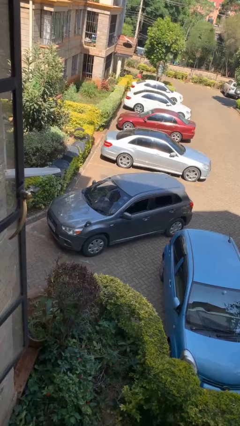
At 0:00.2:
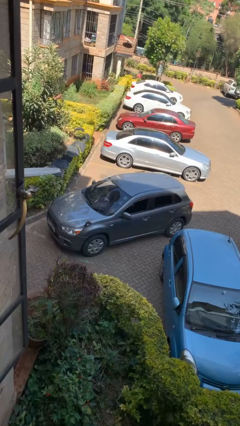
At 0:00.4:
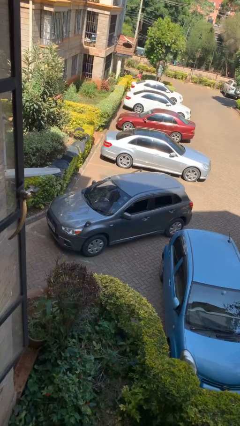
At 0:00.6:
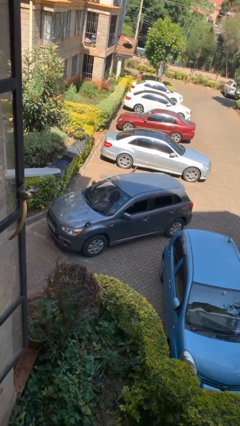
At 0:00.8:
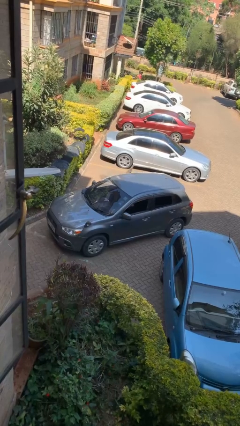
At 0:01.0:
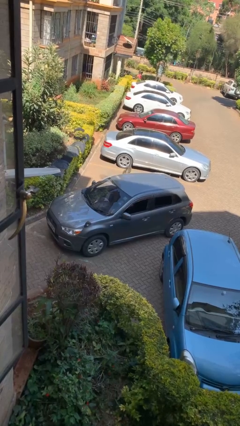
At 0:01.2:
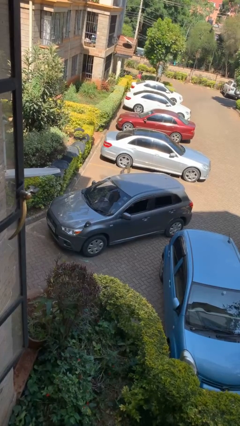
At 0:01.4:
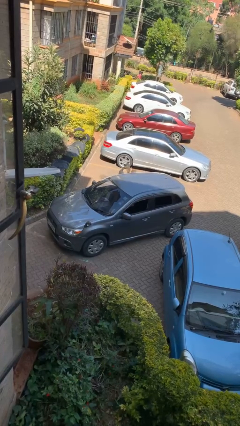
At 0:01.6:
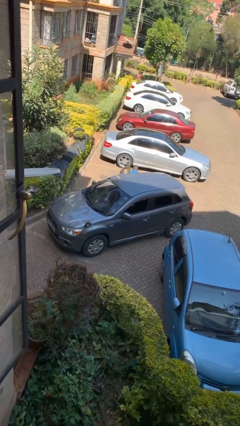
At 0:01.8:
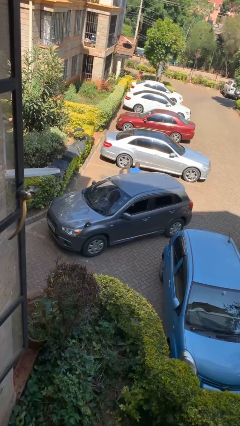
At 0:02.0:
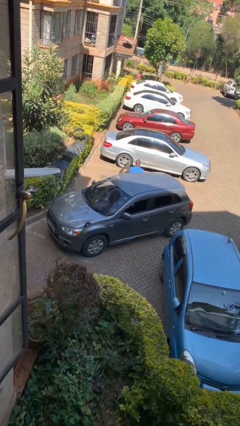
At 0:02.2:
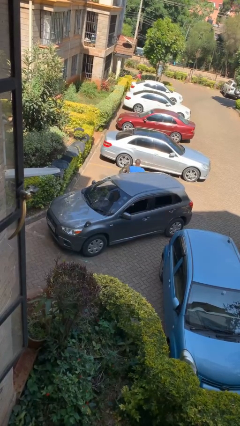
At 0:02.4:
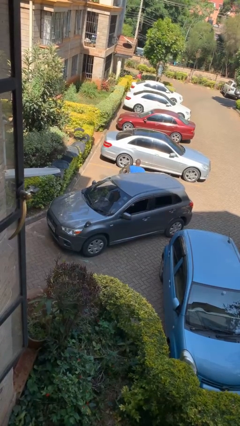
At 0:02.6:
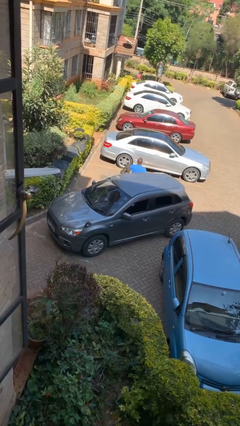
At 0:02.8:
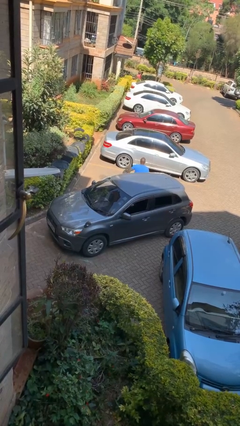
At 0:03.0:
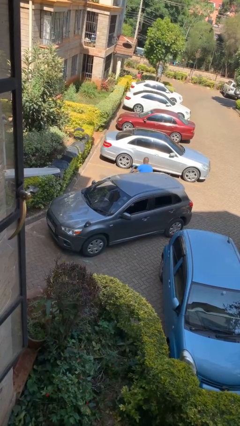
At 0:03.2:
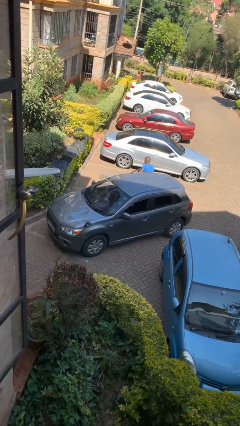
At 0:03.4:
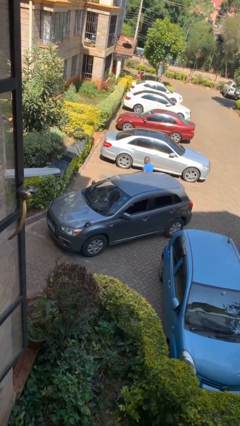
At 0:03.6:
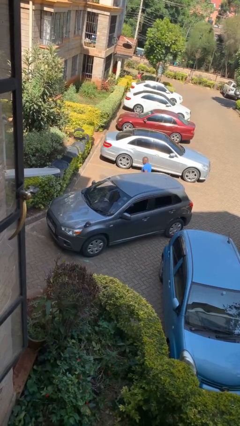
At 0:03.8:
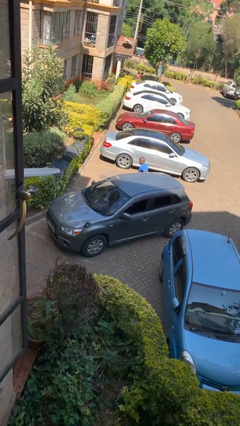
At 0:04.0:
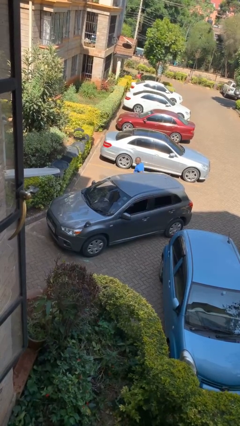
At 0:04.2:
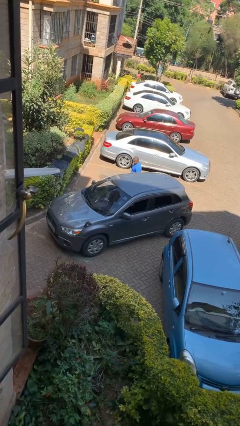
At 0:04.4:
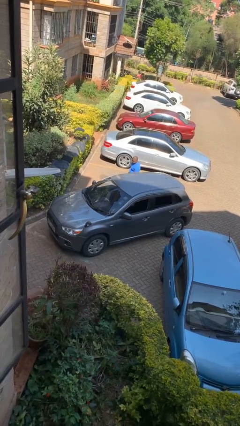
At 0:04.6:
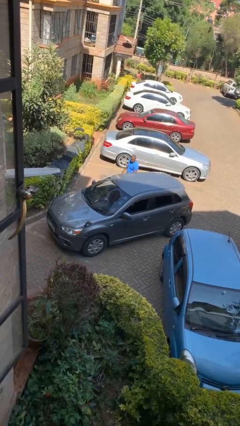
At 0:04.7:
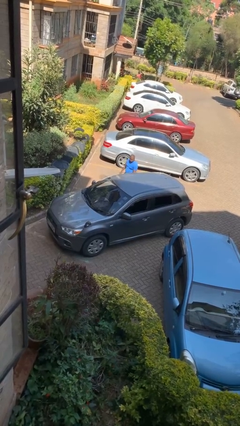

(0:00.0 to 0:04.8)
car drops off person

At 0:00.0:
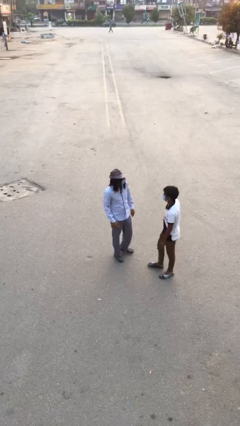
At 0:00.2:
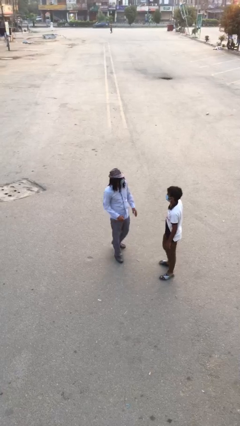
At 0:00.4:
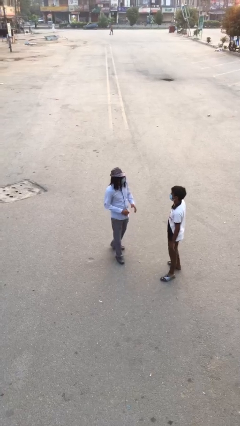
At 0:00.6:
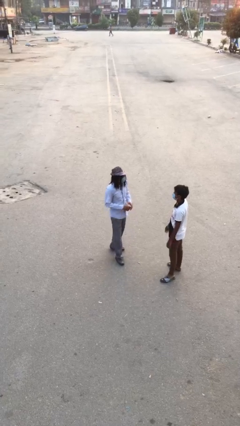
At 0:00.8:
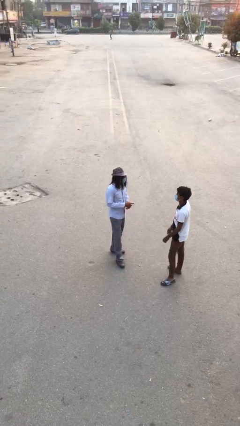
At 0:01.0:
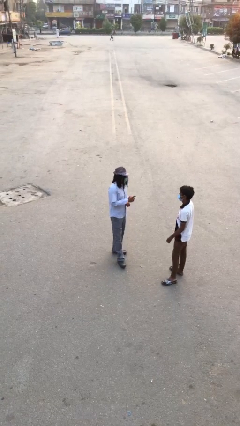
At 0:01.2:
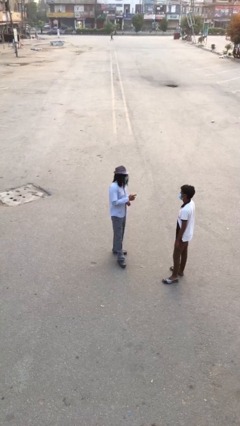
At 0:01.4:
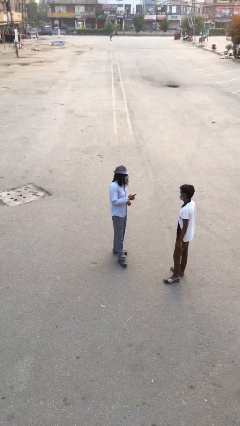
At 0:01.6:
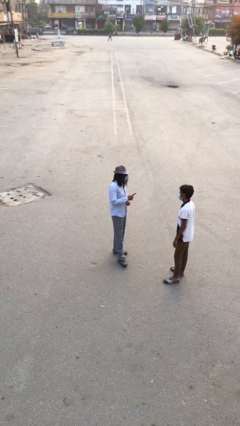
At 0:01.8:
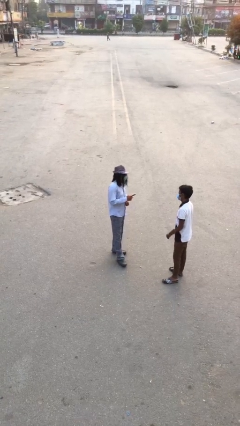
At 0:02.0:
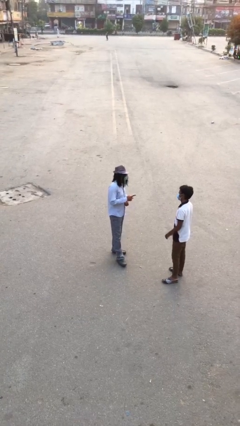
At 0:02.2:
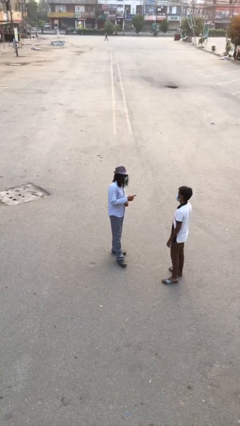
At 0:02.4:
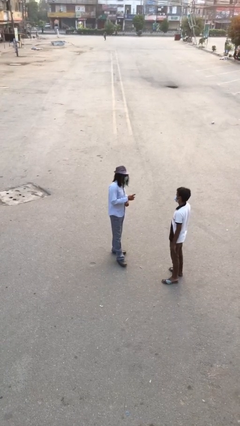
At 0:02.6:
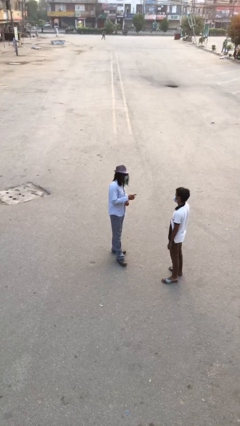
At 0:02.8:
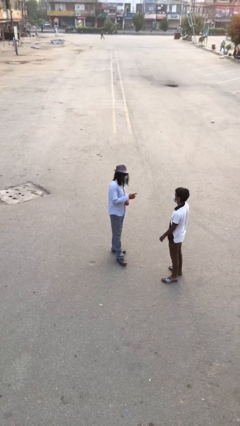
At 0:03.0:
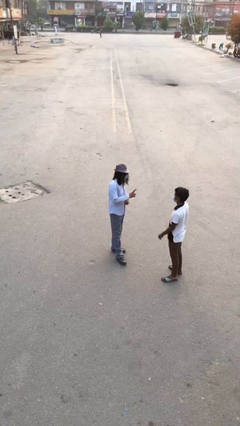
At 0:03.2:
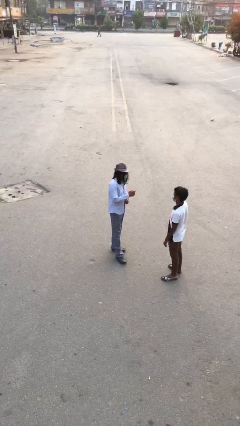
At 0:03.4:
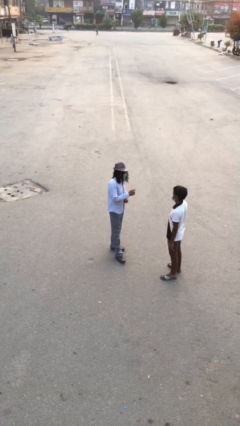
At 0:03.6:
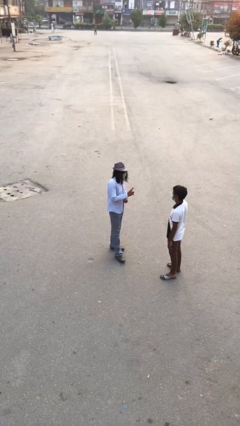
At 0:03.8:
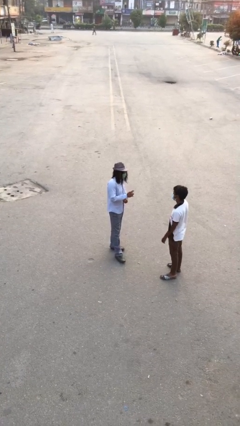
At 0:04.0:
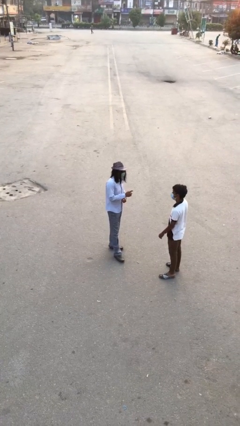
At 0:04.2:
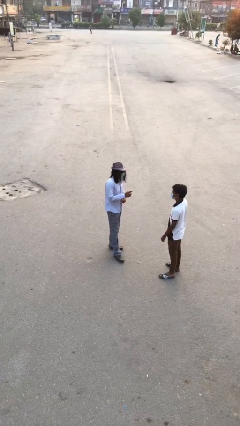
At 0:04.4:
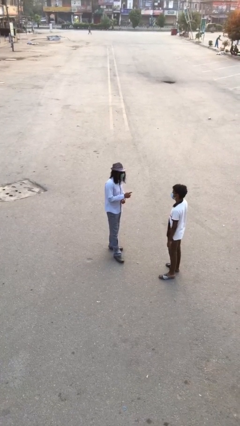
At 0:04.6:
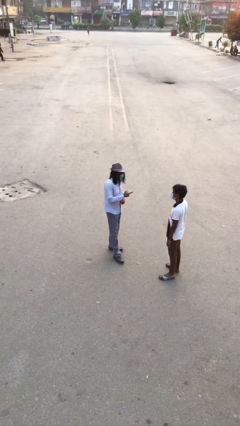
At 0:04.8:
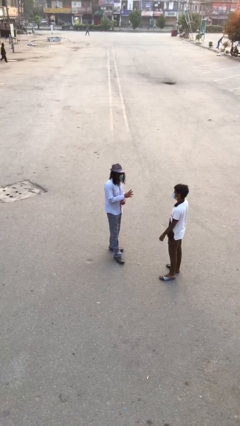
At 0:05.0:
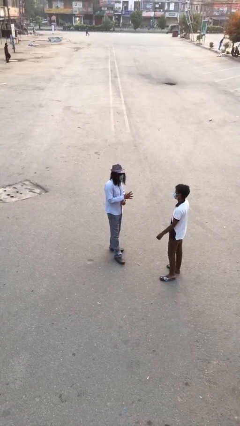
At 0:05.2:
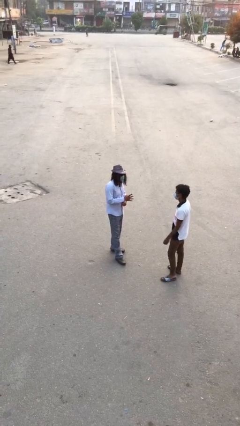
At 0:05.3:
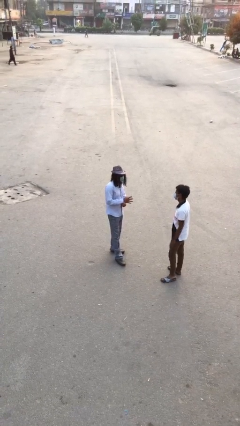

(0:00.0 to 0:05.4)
person talks to person

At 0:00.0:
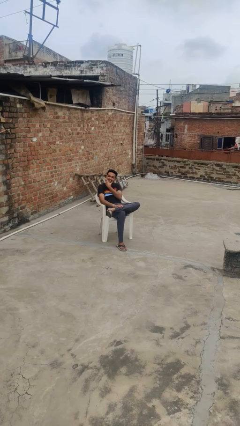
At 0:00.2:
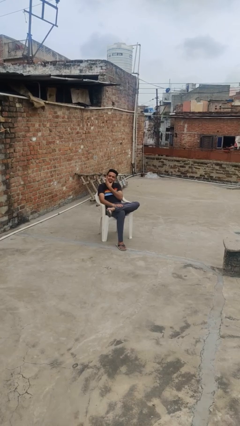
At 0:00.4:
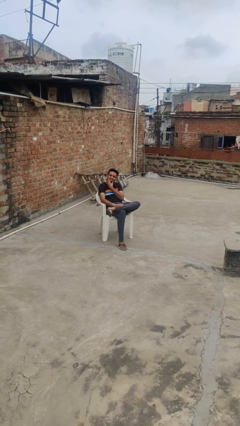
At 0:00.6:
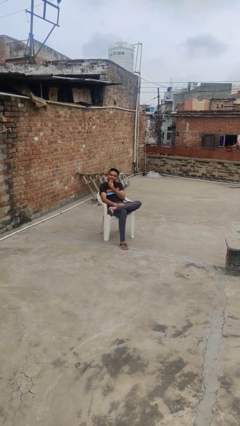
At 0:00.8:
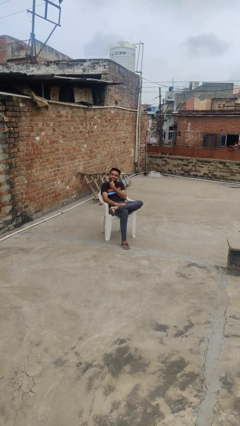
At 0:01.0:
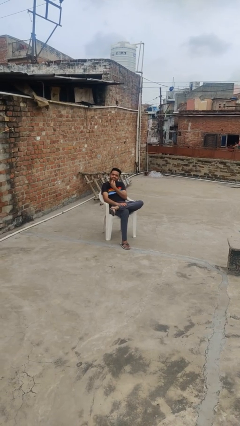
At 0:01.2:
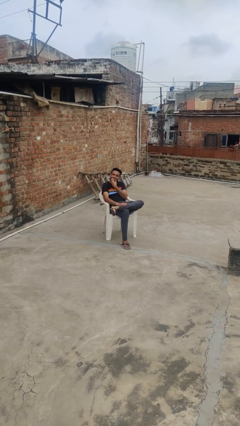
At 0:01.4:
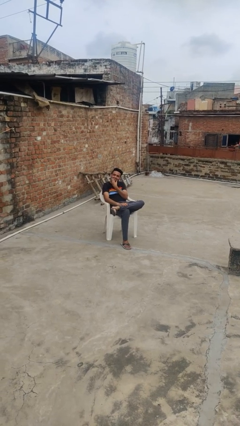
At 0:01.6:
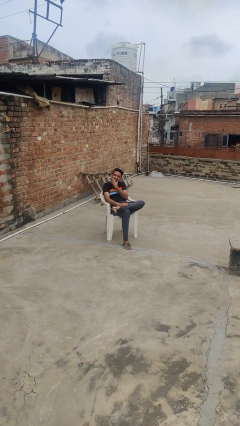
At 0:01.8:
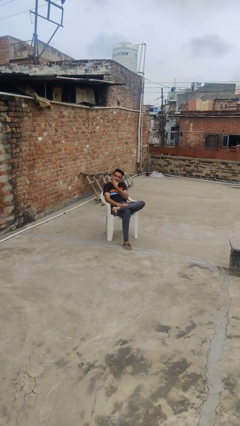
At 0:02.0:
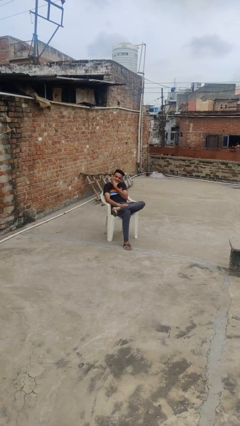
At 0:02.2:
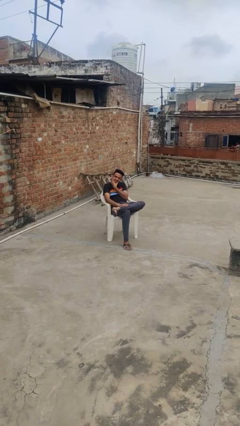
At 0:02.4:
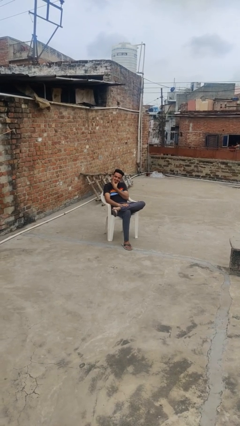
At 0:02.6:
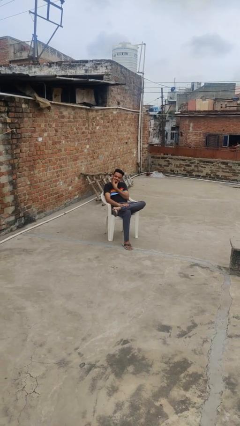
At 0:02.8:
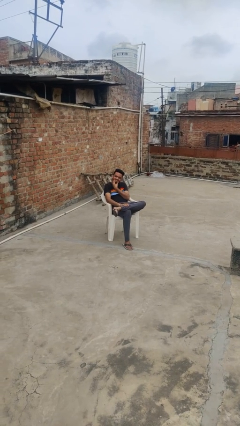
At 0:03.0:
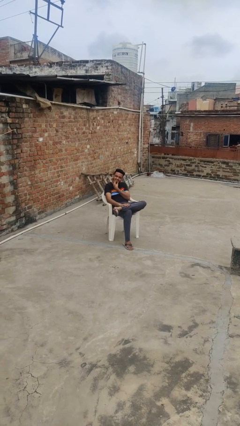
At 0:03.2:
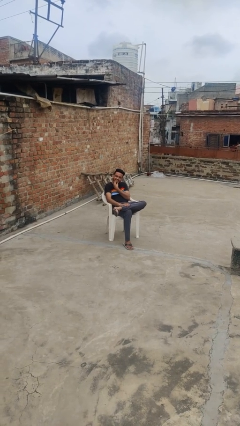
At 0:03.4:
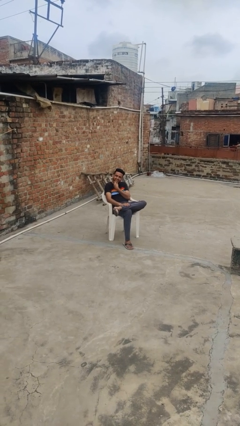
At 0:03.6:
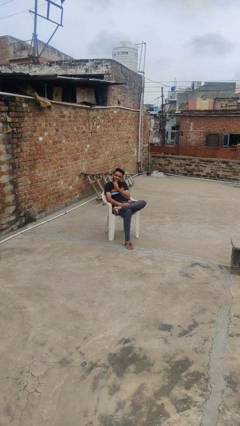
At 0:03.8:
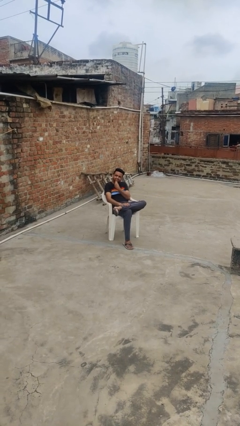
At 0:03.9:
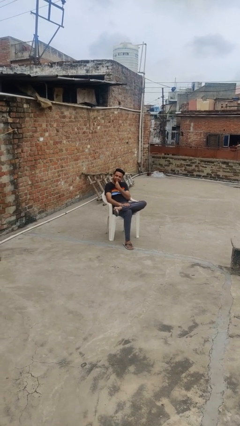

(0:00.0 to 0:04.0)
person strokes chin

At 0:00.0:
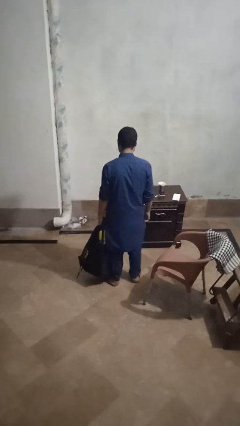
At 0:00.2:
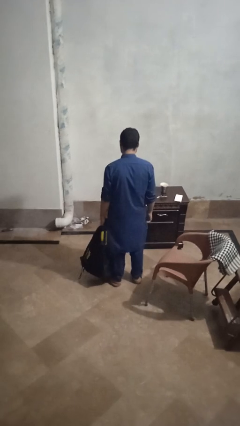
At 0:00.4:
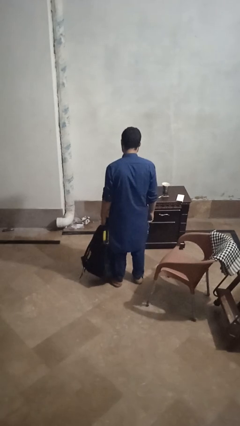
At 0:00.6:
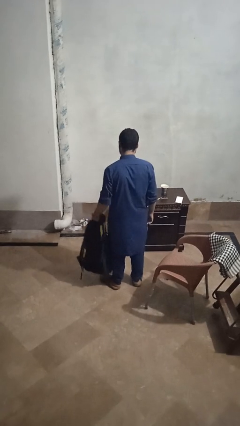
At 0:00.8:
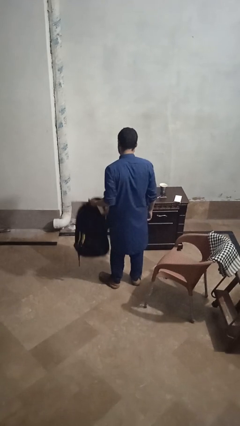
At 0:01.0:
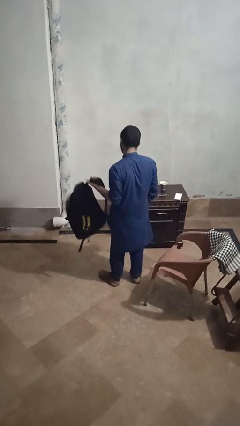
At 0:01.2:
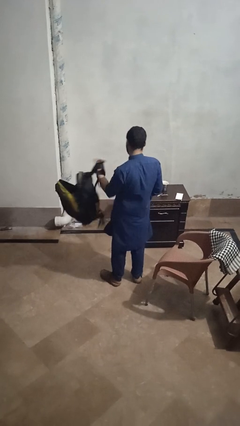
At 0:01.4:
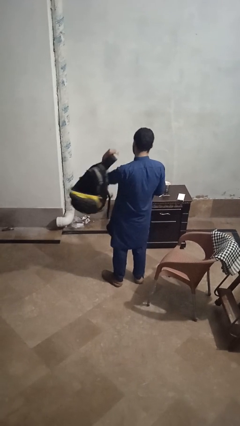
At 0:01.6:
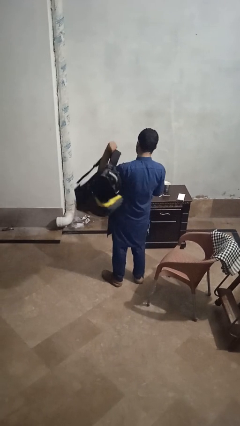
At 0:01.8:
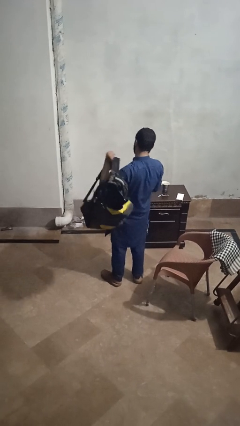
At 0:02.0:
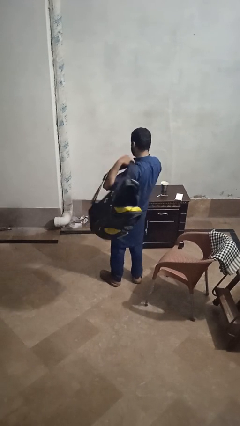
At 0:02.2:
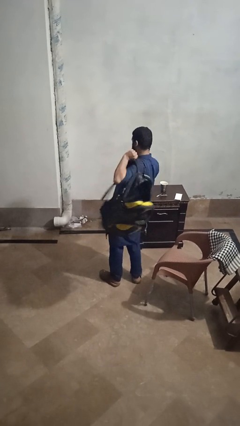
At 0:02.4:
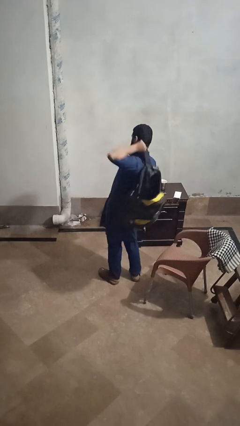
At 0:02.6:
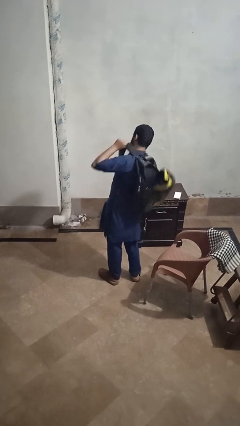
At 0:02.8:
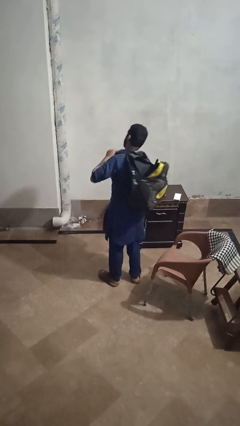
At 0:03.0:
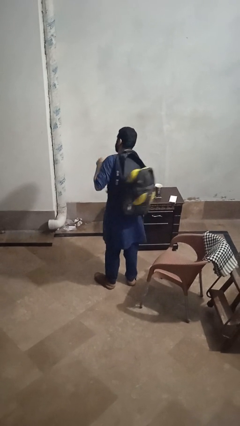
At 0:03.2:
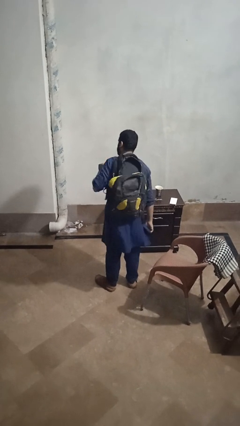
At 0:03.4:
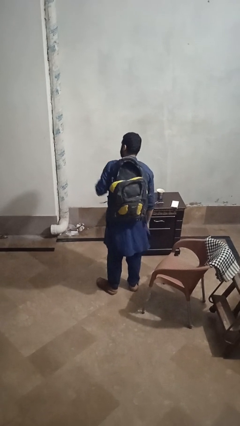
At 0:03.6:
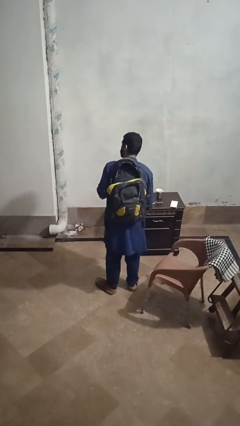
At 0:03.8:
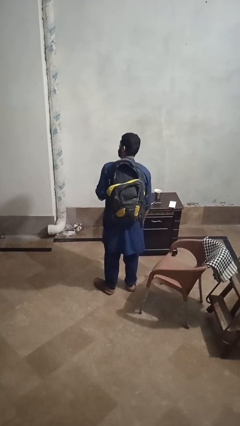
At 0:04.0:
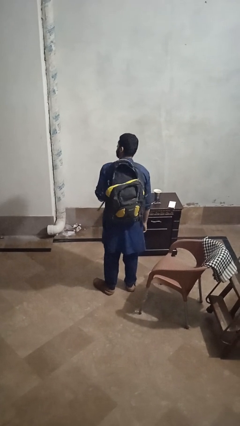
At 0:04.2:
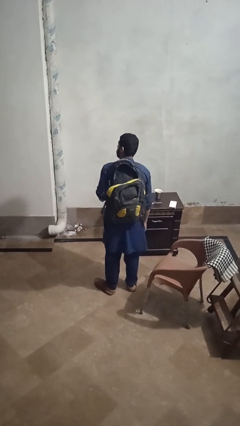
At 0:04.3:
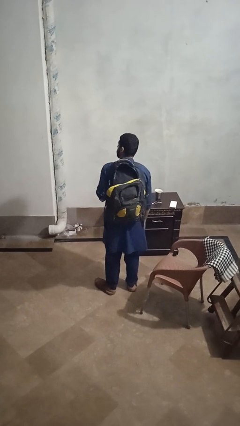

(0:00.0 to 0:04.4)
person puts on backpack
